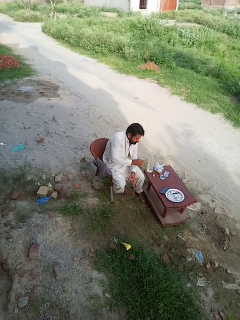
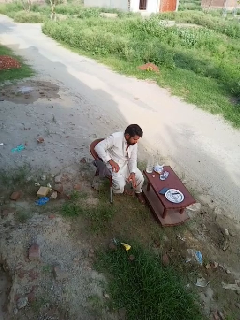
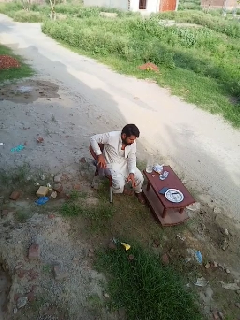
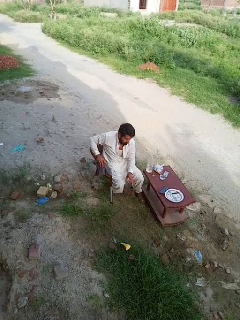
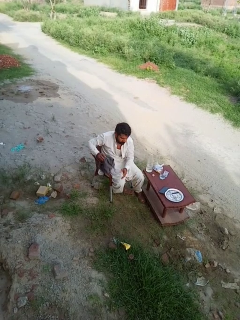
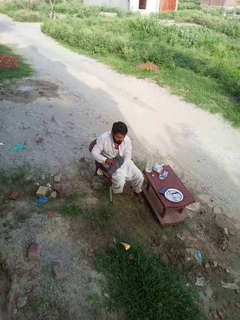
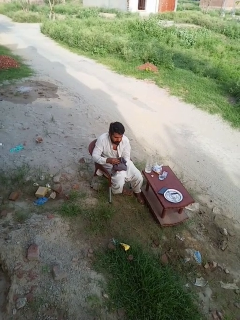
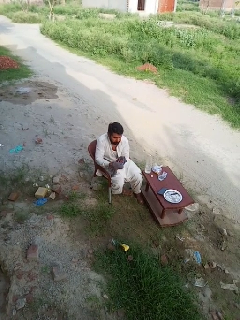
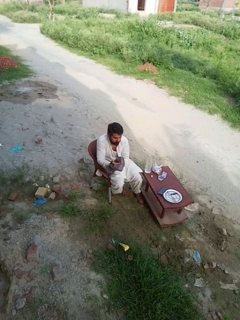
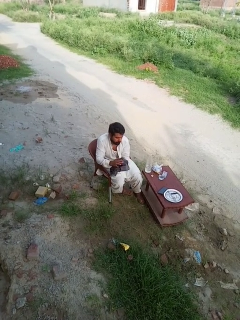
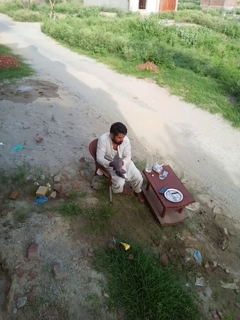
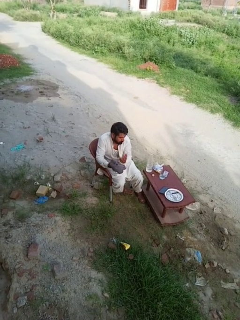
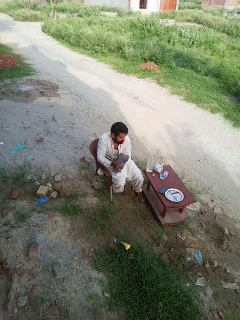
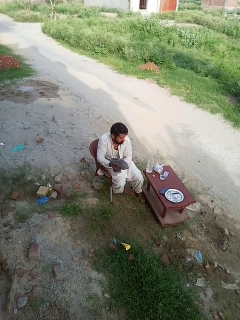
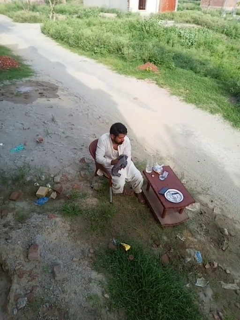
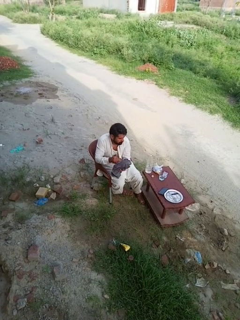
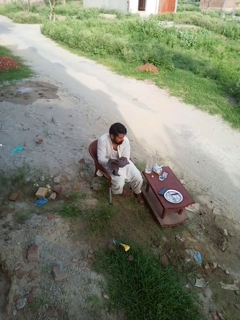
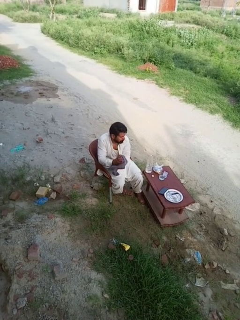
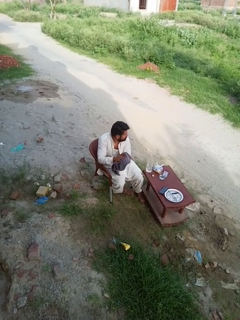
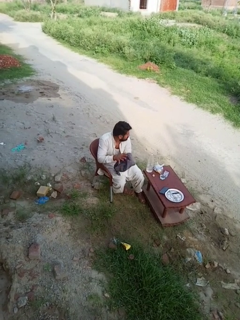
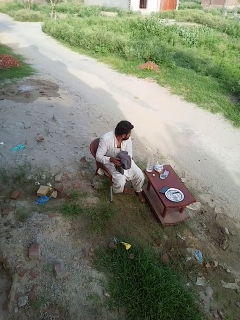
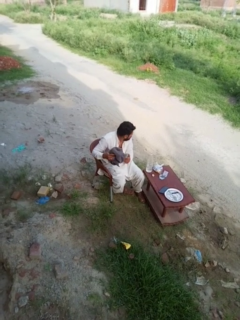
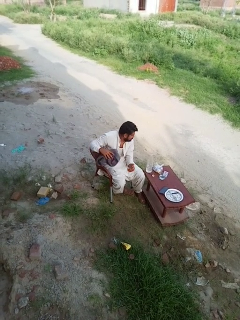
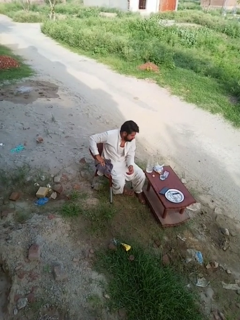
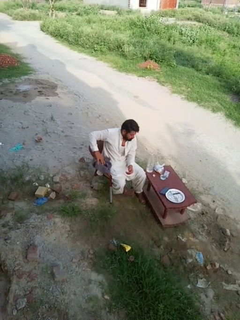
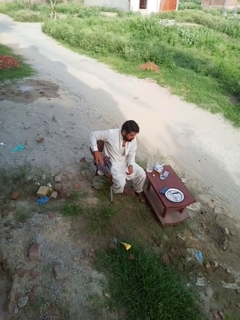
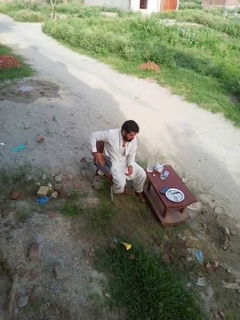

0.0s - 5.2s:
person dries hands with towel

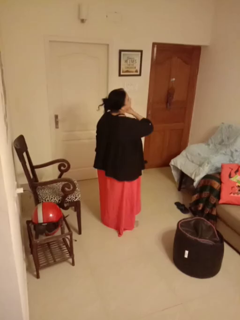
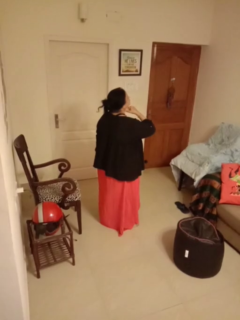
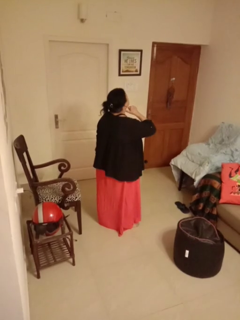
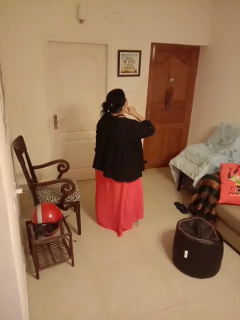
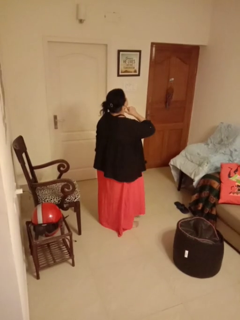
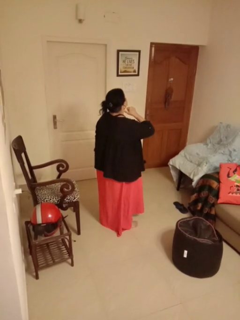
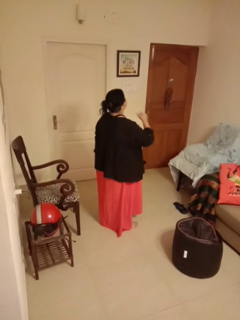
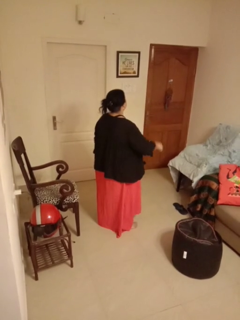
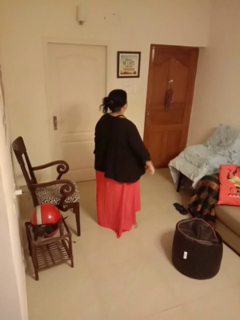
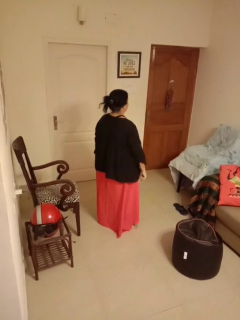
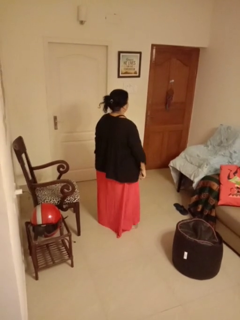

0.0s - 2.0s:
person gestures cut

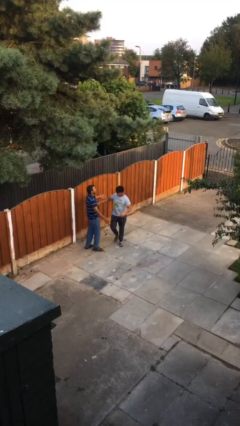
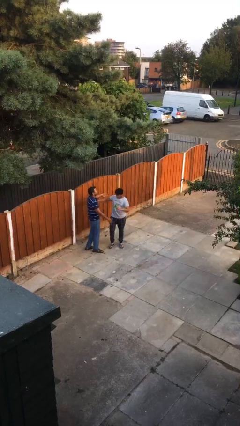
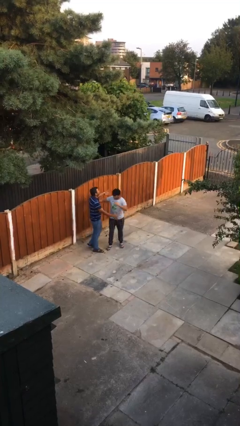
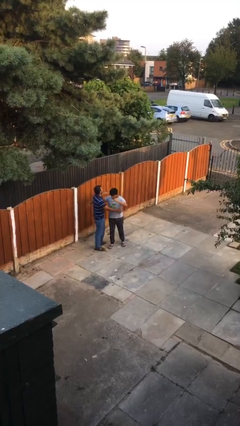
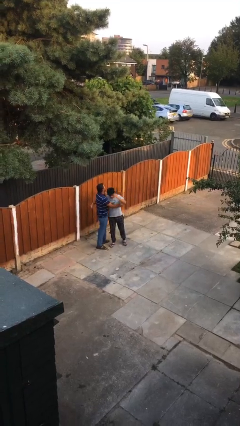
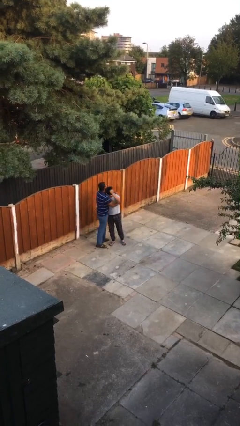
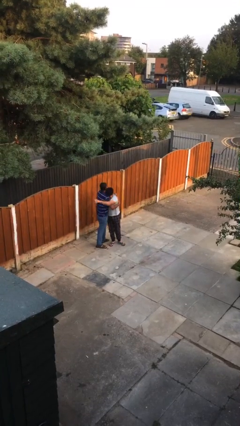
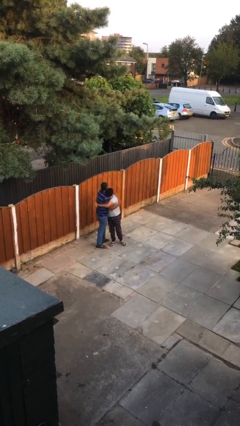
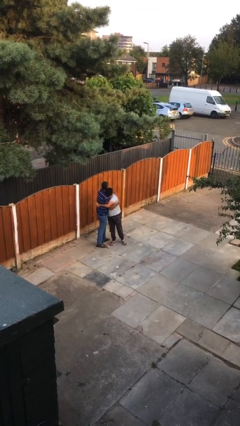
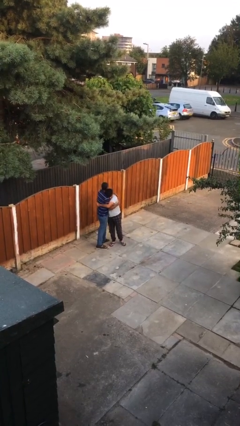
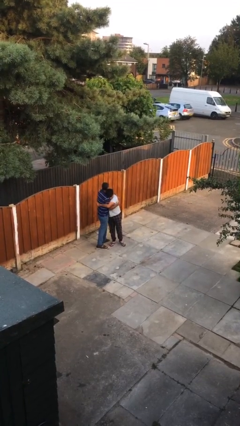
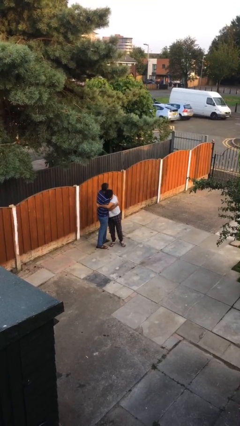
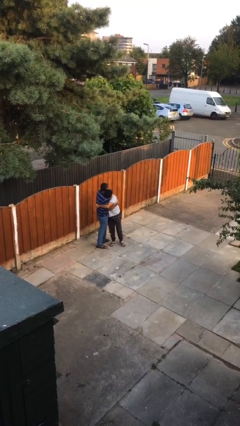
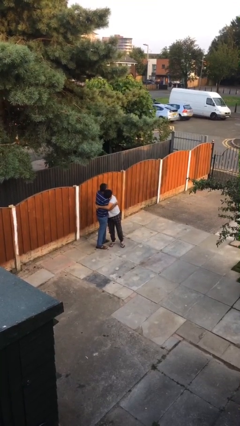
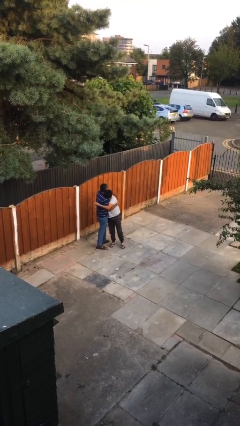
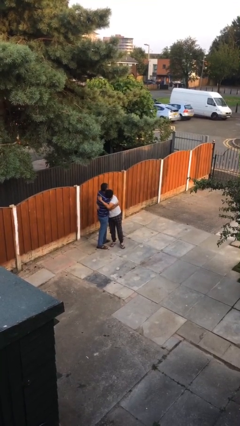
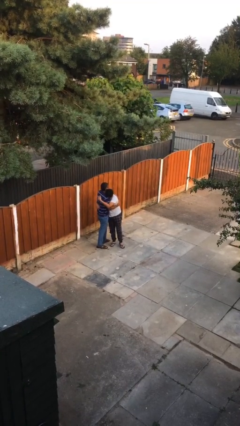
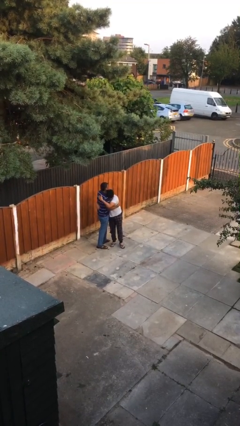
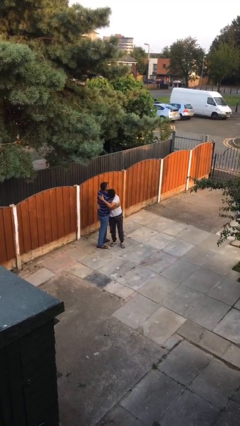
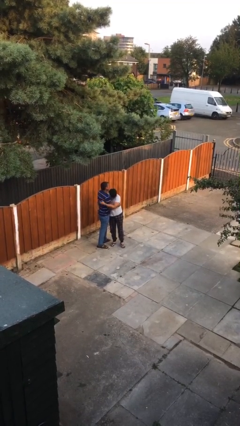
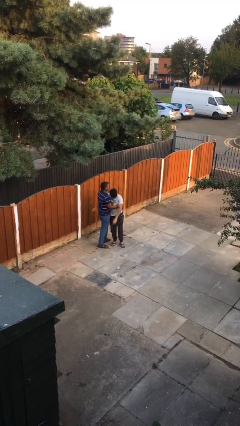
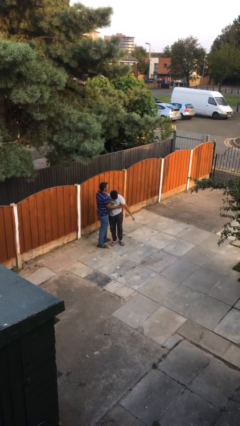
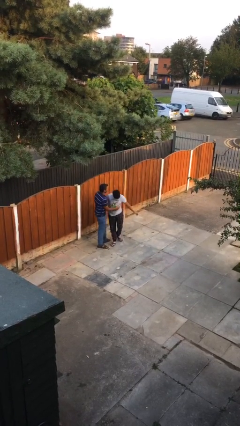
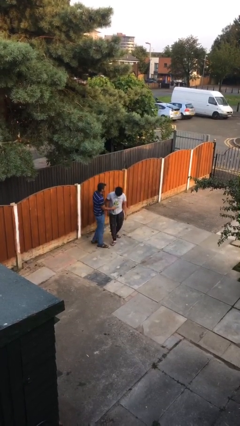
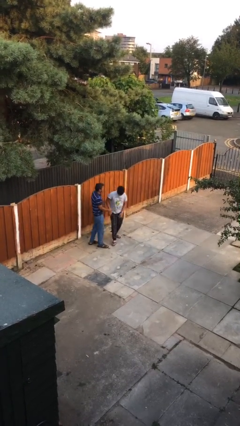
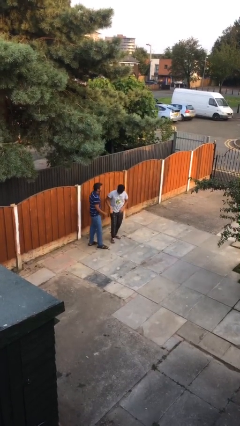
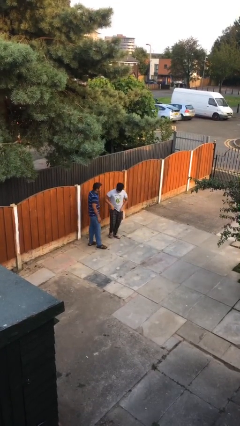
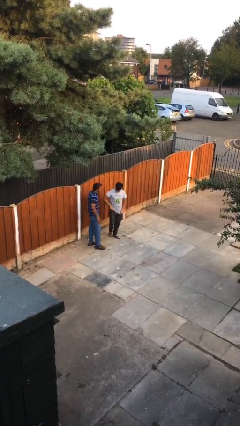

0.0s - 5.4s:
person embraces person

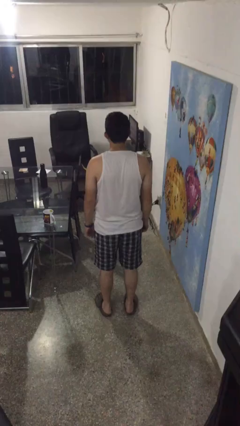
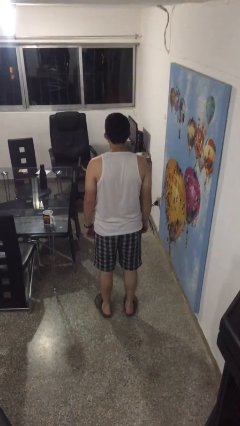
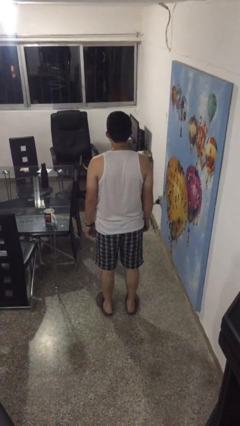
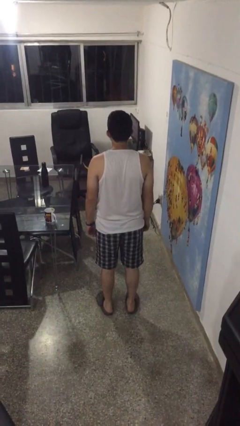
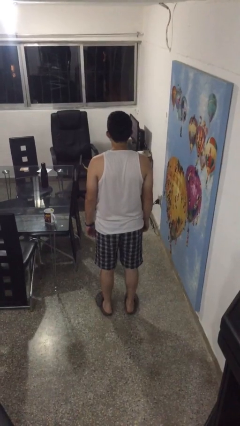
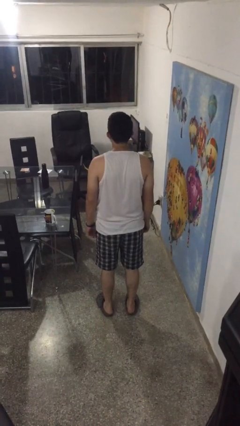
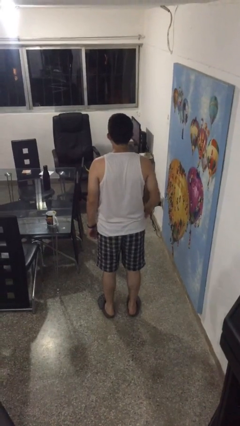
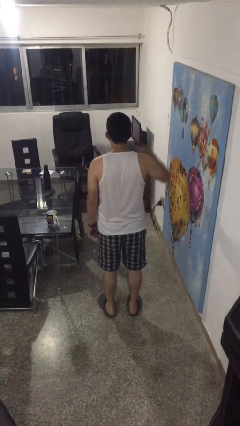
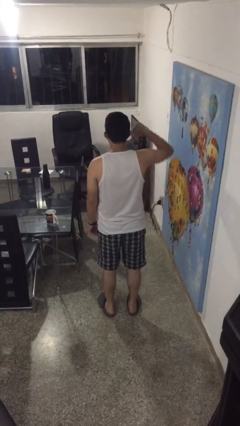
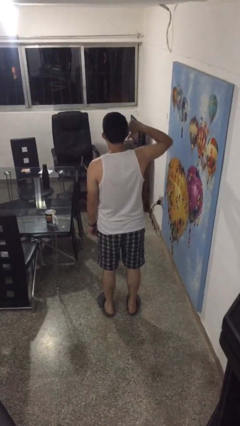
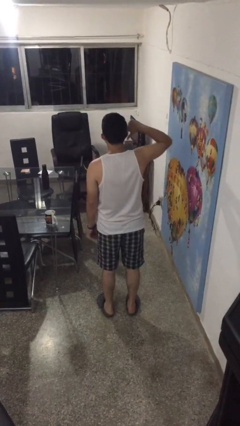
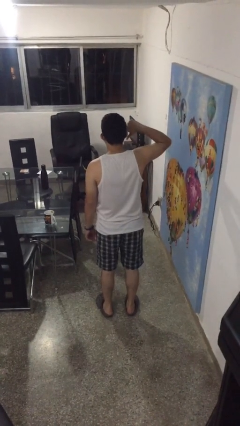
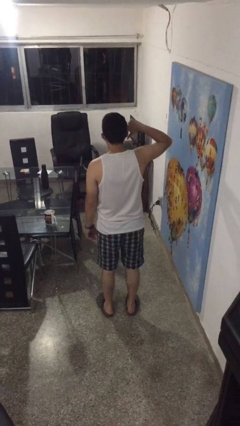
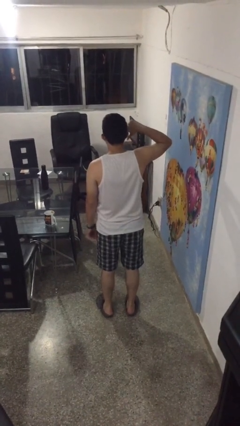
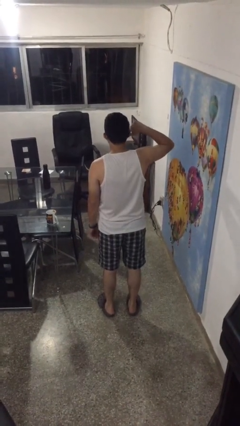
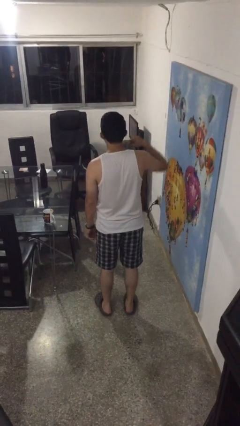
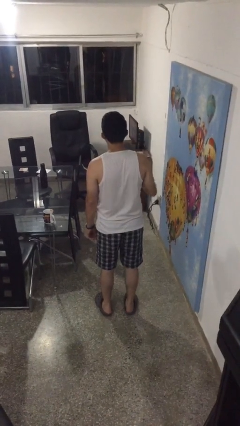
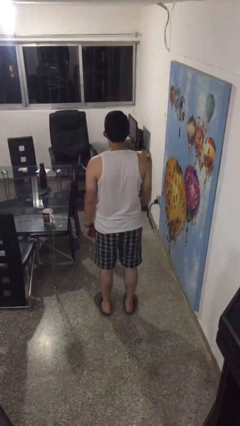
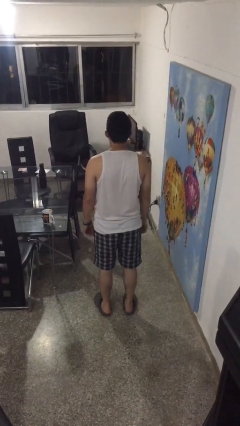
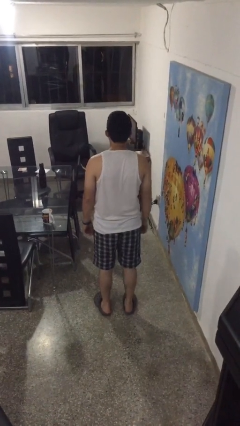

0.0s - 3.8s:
person gestures thumbs down

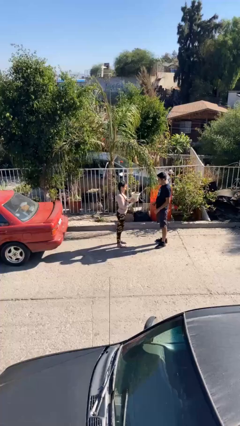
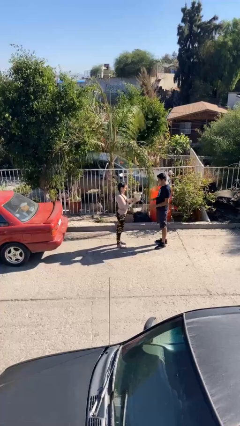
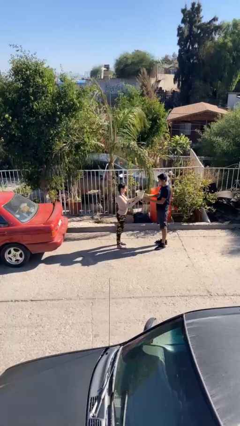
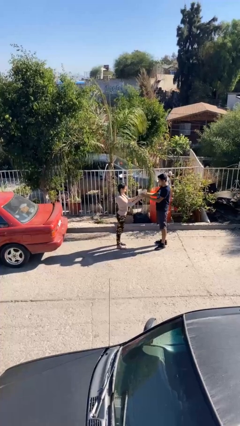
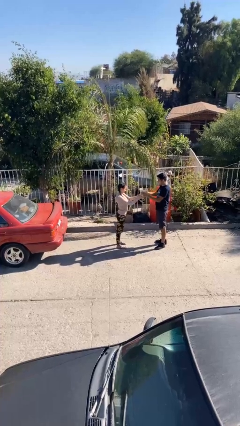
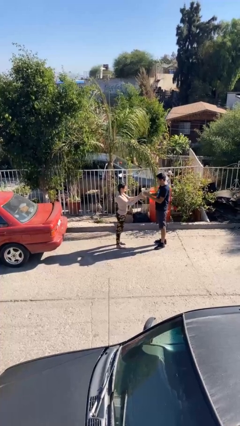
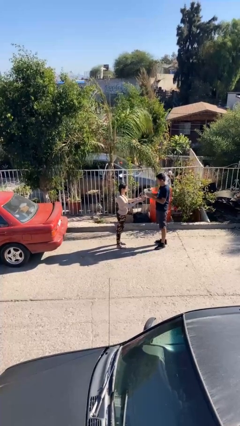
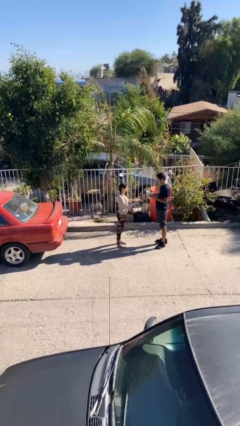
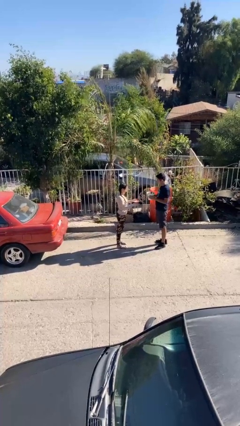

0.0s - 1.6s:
person transfers object to person

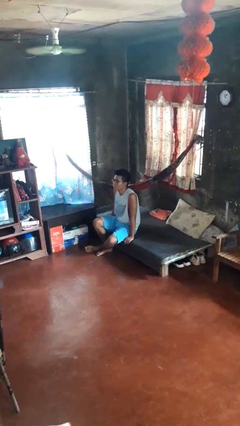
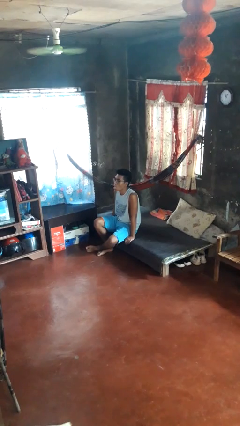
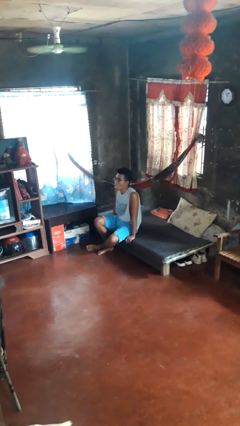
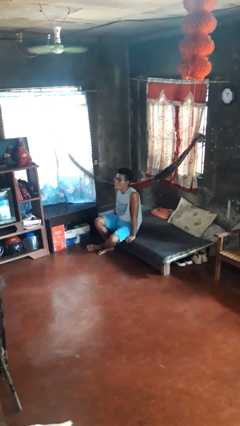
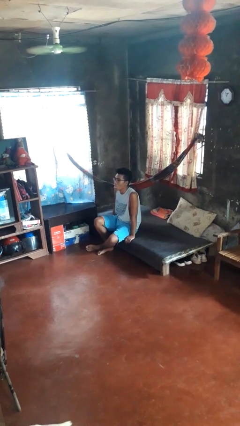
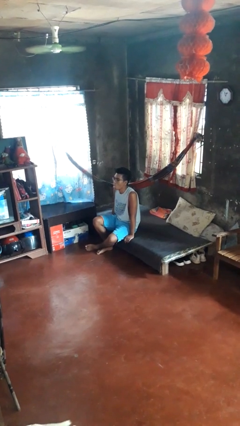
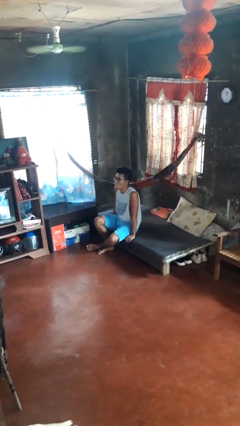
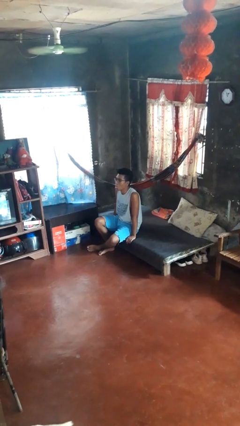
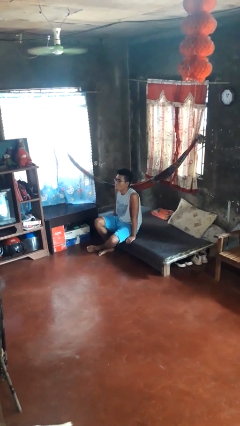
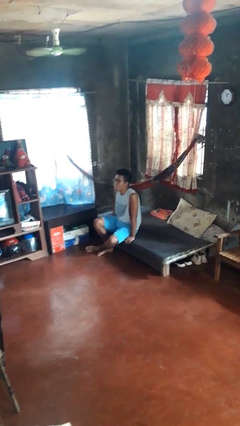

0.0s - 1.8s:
person sticks out tongue
